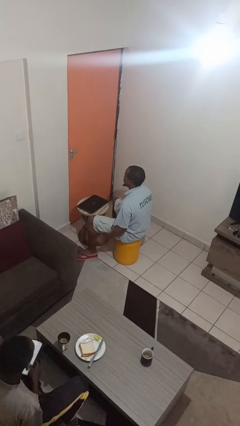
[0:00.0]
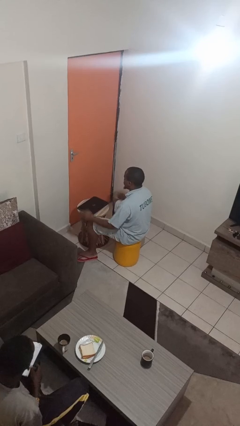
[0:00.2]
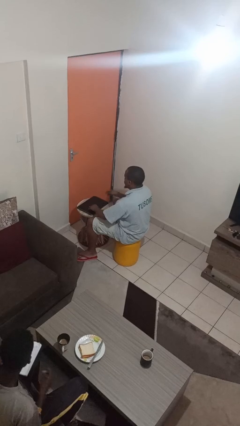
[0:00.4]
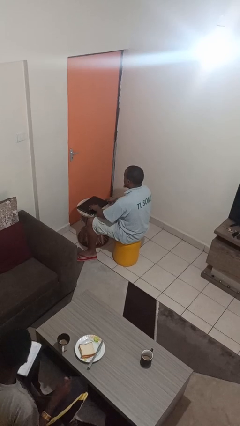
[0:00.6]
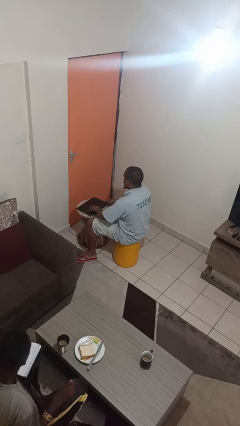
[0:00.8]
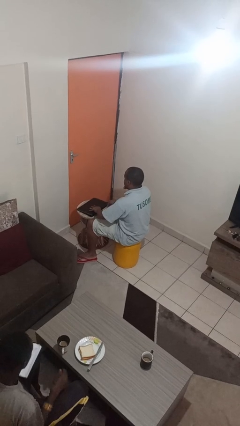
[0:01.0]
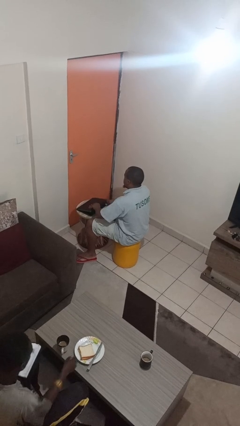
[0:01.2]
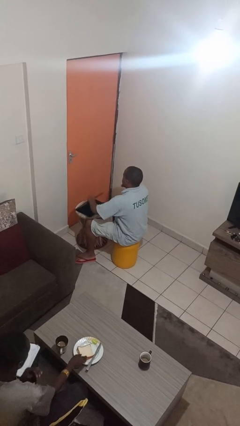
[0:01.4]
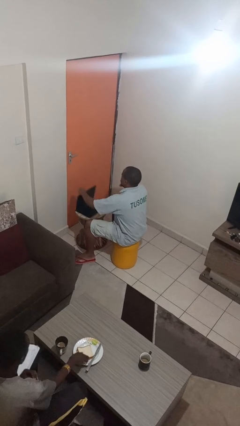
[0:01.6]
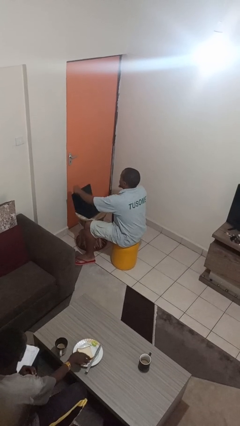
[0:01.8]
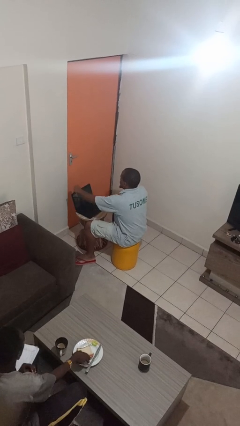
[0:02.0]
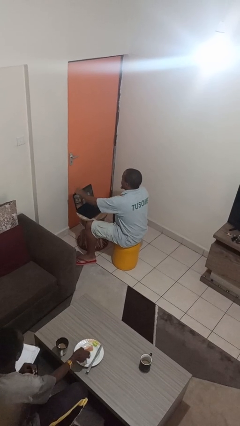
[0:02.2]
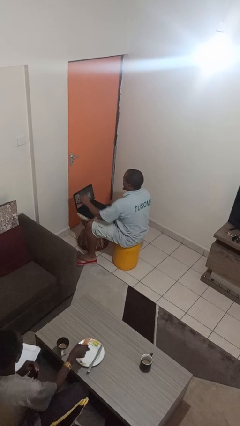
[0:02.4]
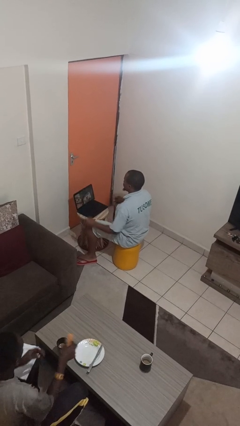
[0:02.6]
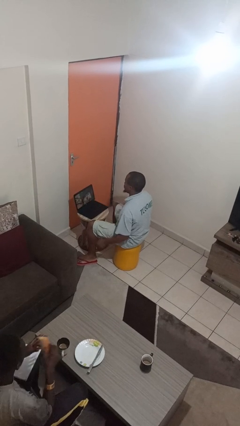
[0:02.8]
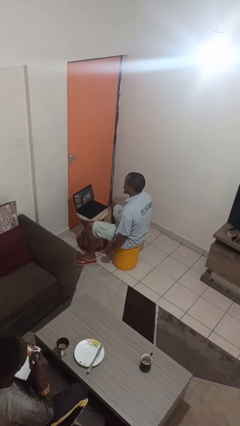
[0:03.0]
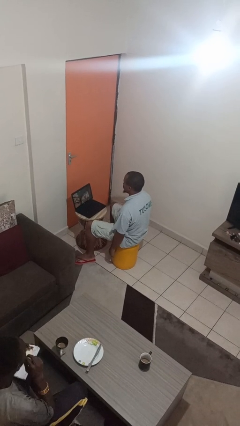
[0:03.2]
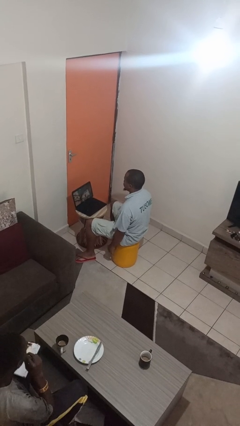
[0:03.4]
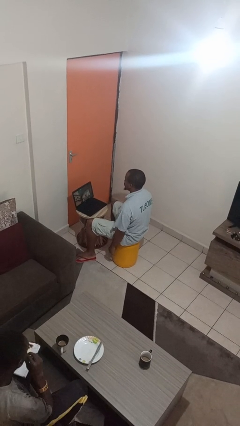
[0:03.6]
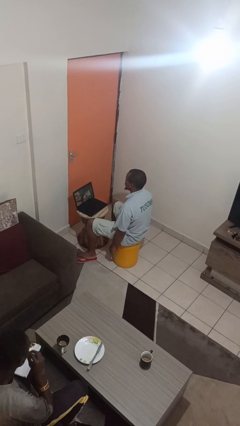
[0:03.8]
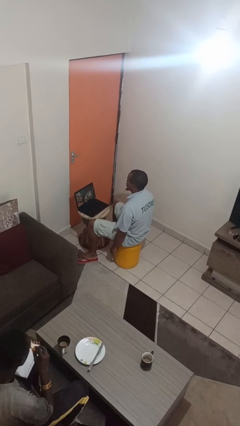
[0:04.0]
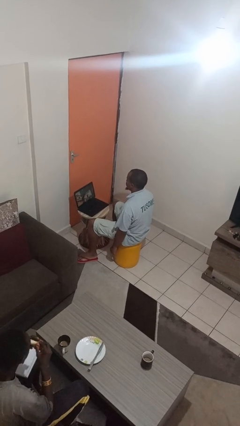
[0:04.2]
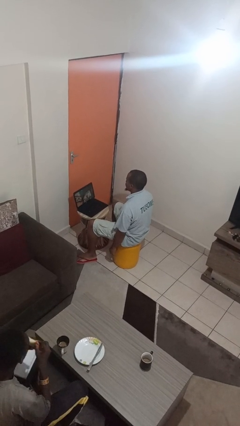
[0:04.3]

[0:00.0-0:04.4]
person opens laptop

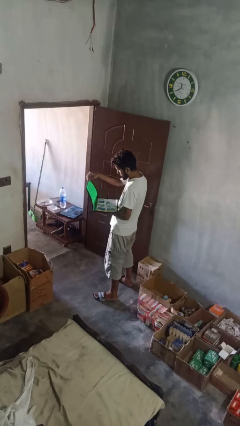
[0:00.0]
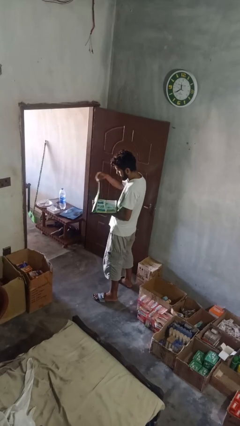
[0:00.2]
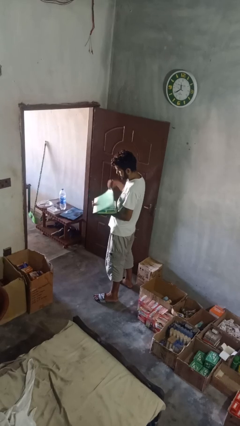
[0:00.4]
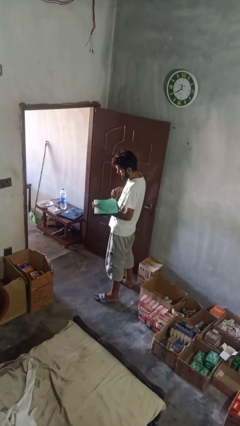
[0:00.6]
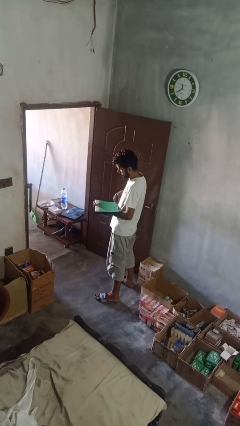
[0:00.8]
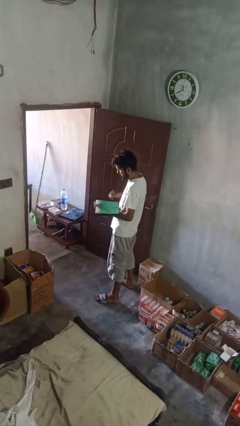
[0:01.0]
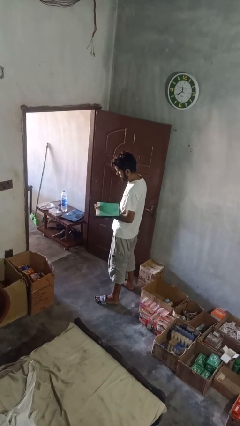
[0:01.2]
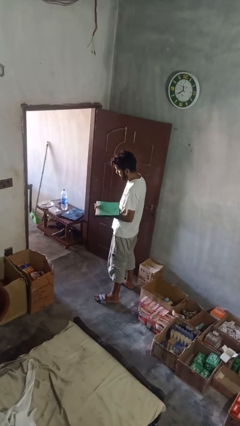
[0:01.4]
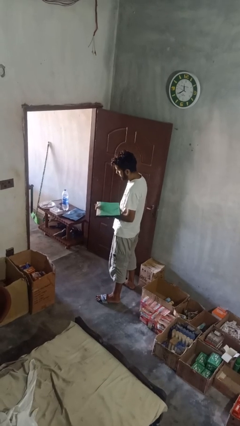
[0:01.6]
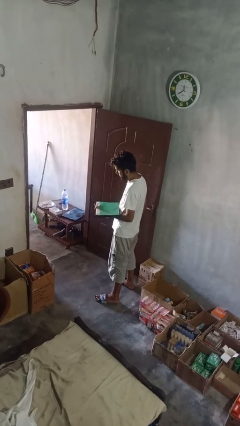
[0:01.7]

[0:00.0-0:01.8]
person closes laptop

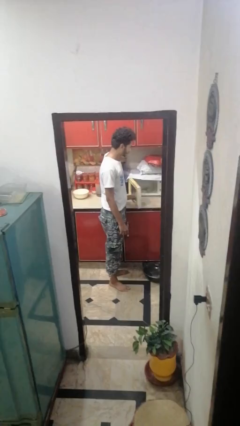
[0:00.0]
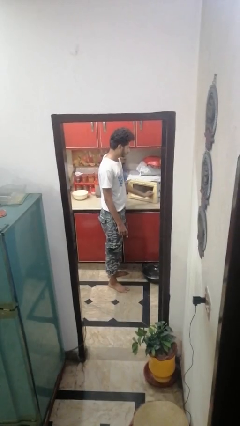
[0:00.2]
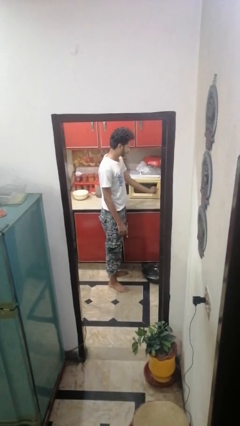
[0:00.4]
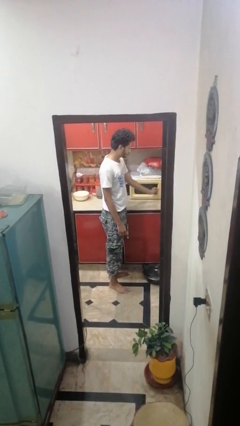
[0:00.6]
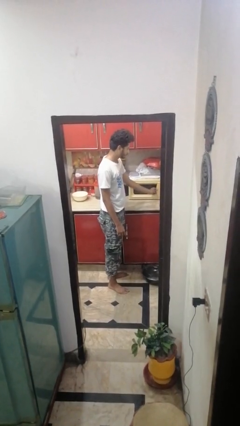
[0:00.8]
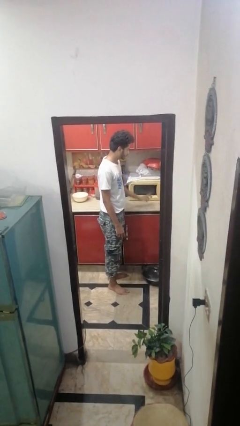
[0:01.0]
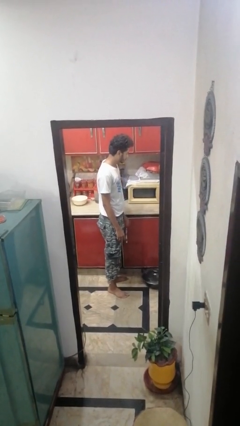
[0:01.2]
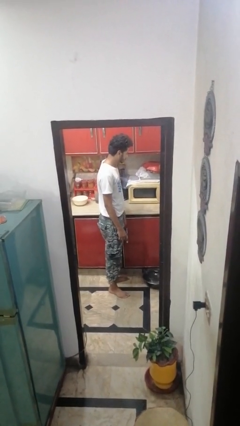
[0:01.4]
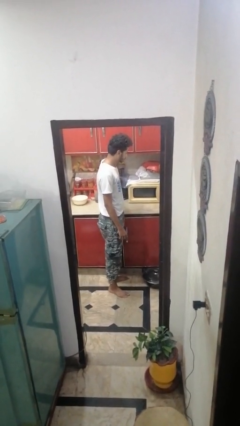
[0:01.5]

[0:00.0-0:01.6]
person closes microwave

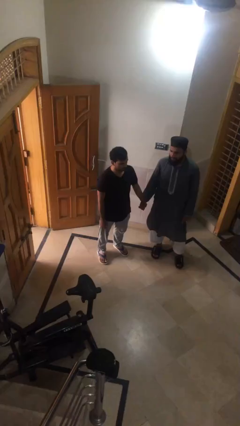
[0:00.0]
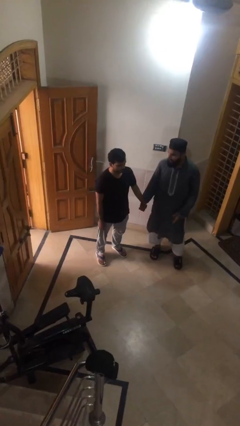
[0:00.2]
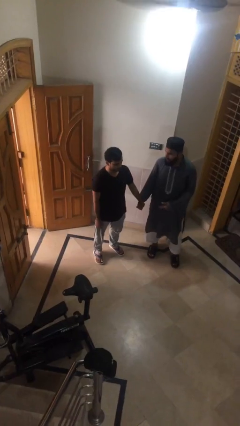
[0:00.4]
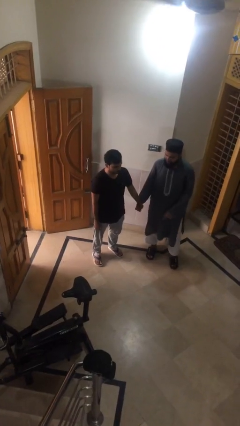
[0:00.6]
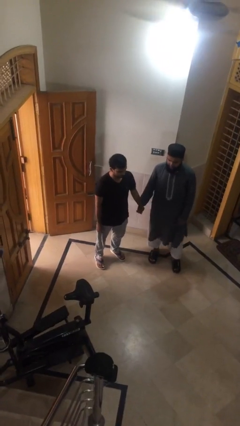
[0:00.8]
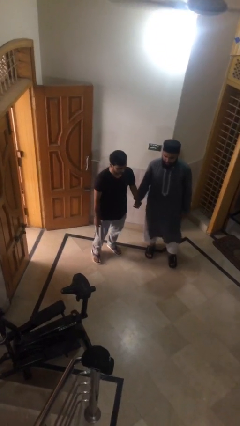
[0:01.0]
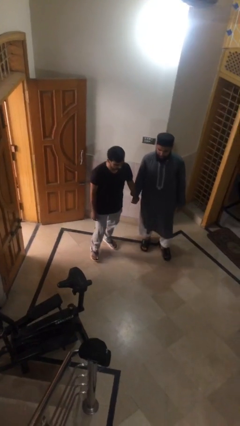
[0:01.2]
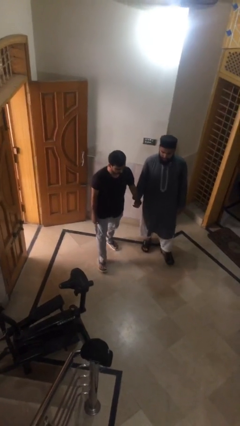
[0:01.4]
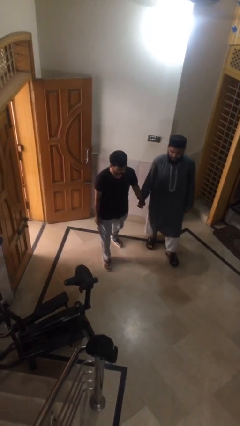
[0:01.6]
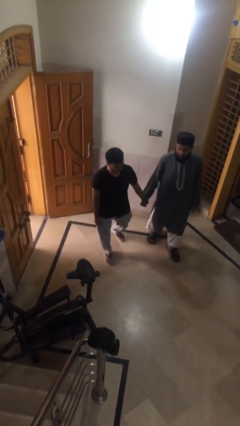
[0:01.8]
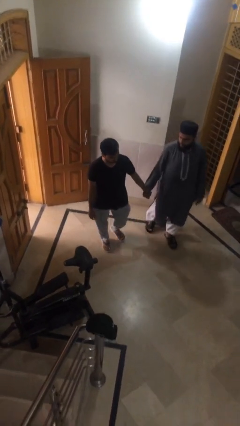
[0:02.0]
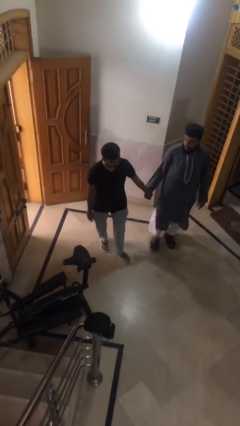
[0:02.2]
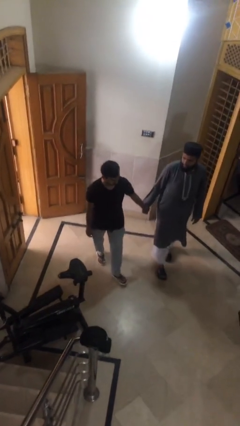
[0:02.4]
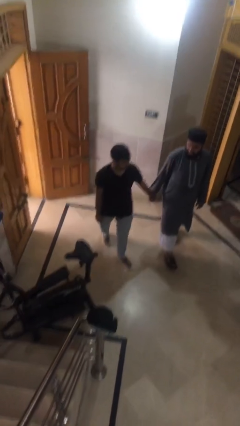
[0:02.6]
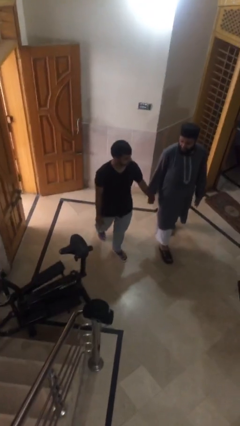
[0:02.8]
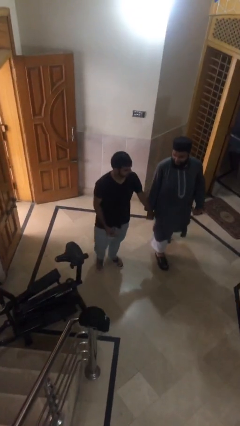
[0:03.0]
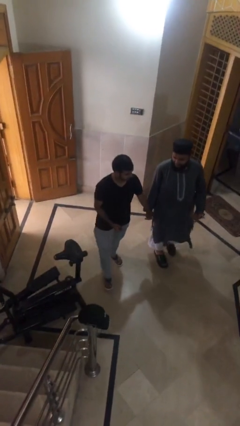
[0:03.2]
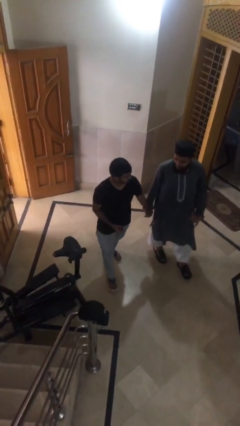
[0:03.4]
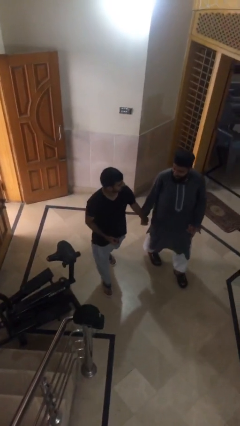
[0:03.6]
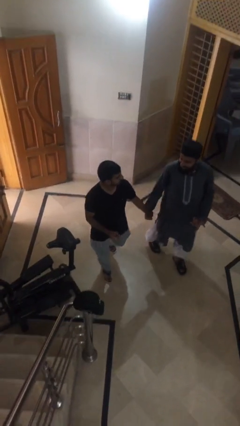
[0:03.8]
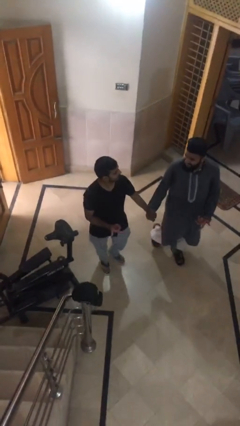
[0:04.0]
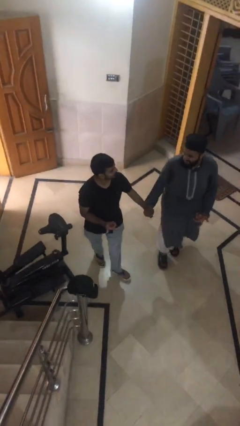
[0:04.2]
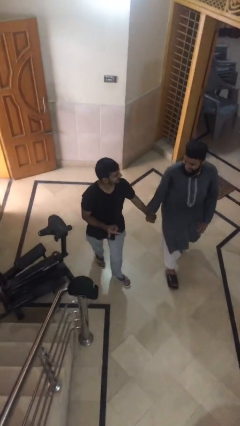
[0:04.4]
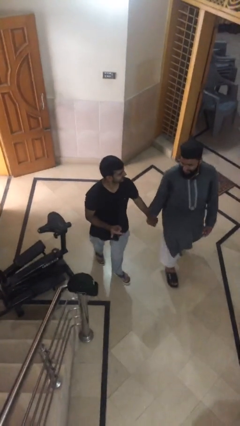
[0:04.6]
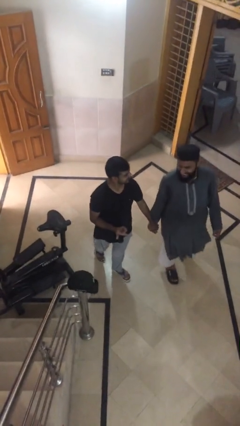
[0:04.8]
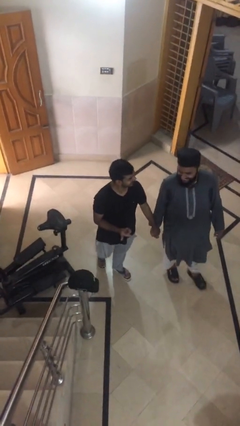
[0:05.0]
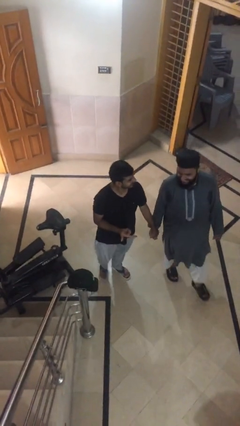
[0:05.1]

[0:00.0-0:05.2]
person holds hand

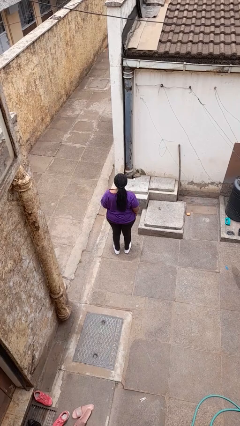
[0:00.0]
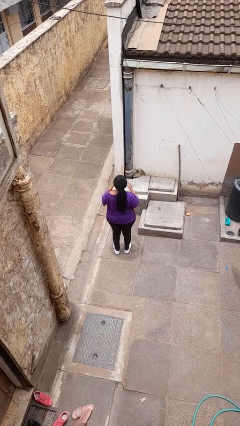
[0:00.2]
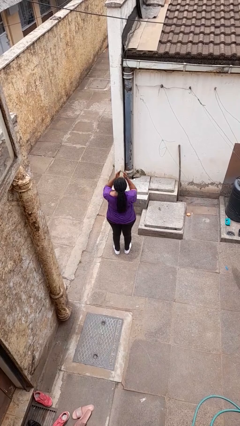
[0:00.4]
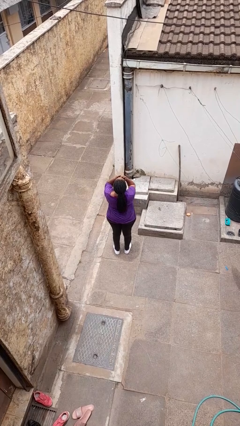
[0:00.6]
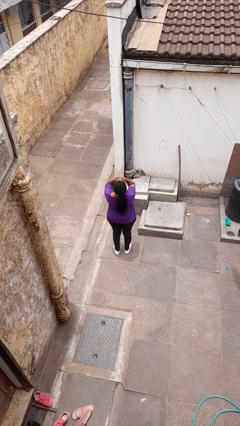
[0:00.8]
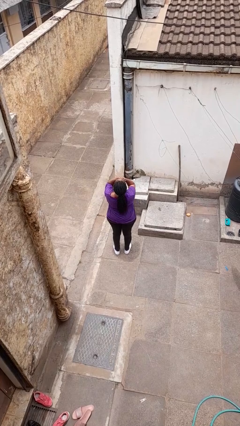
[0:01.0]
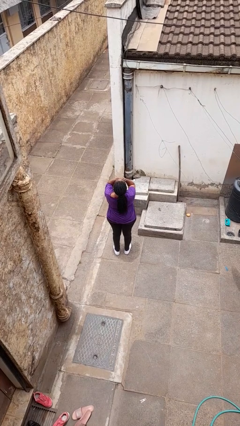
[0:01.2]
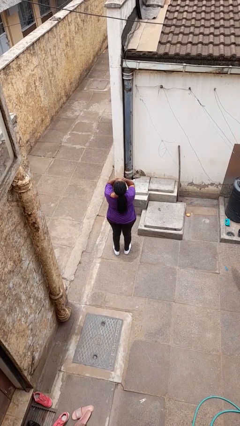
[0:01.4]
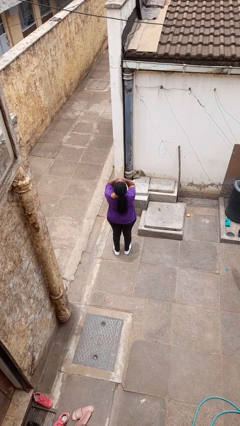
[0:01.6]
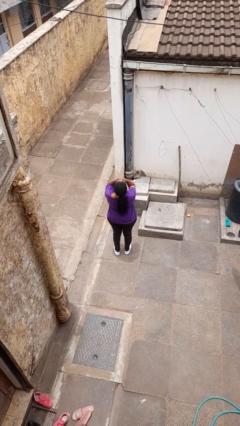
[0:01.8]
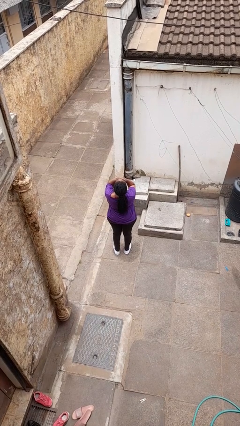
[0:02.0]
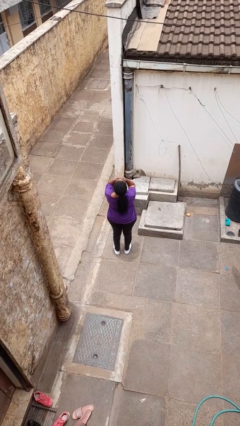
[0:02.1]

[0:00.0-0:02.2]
person covers face with hands

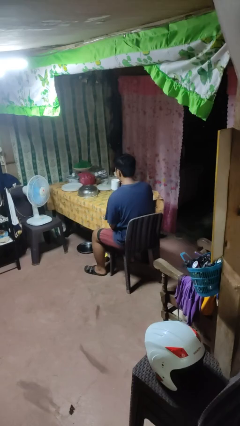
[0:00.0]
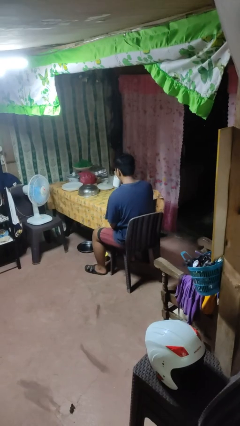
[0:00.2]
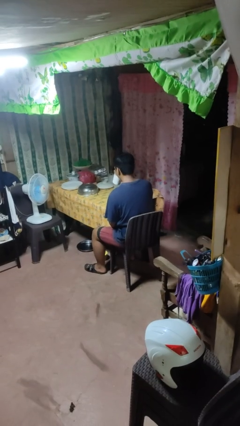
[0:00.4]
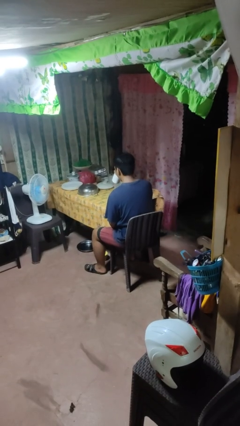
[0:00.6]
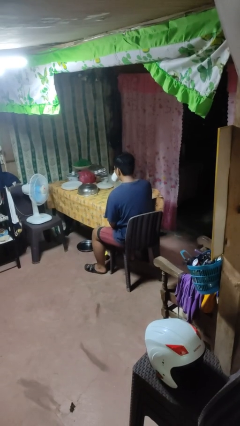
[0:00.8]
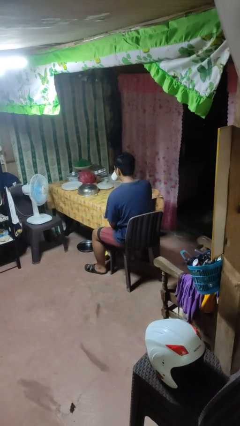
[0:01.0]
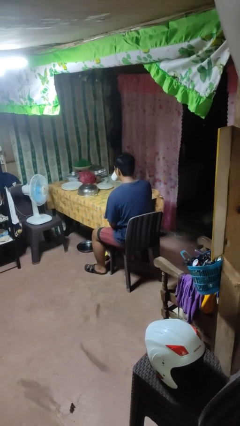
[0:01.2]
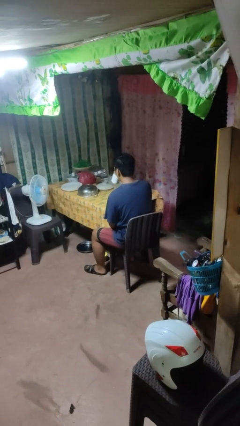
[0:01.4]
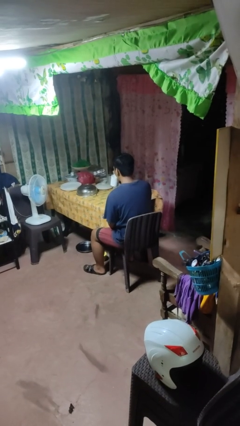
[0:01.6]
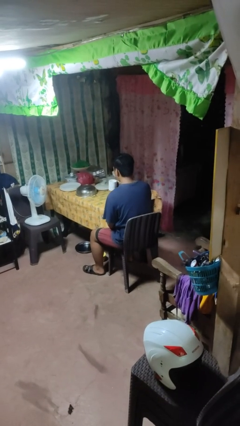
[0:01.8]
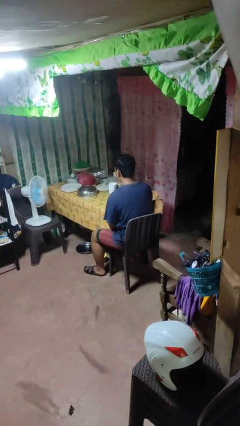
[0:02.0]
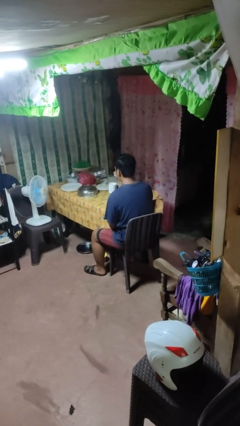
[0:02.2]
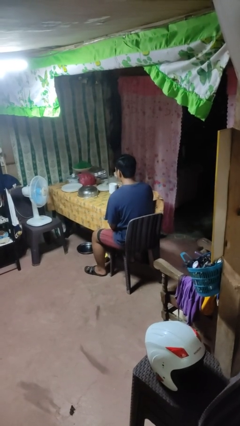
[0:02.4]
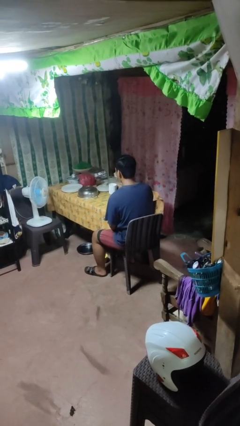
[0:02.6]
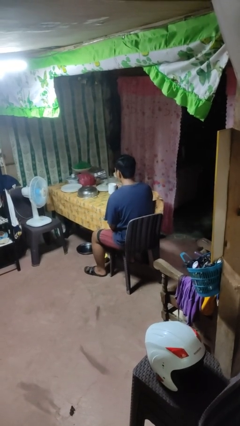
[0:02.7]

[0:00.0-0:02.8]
person drinks from mug
